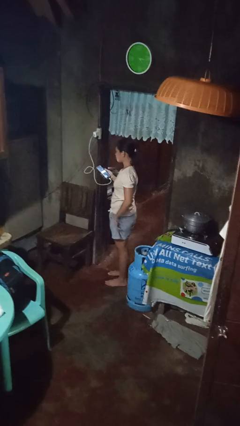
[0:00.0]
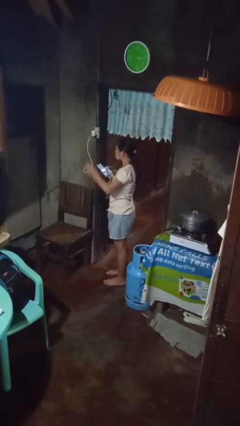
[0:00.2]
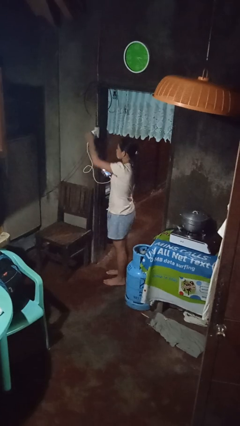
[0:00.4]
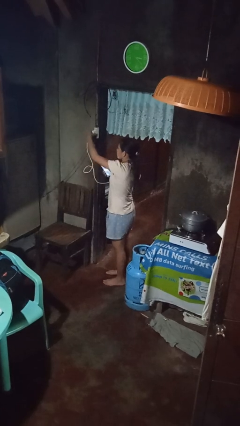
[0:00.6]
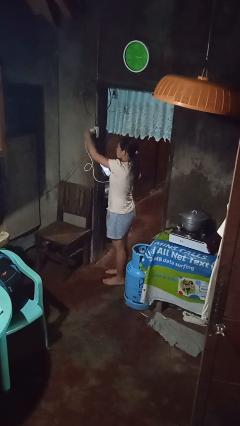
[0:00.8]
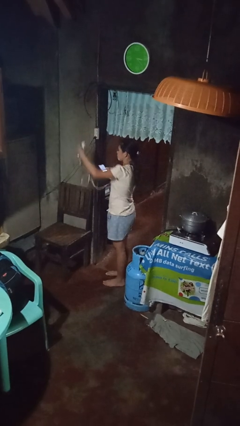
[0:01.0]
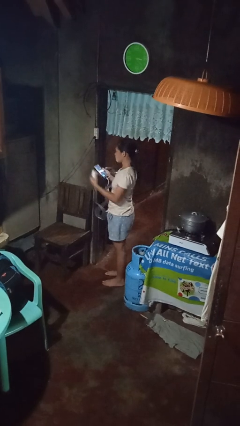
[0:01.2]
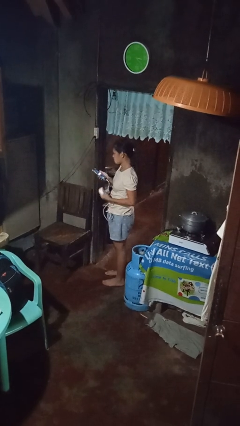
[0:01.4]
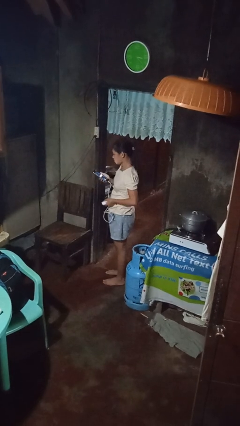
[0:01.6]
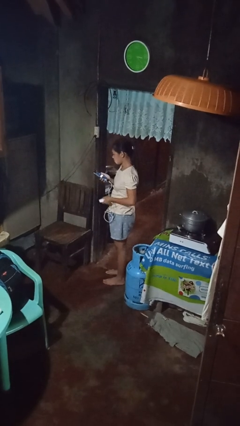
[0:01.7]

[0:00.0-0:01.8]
person unplugs from electrical socket

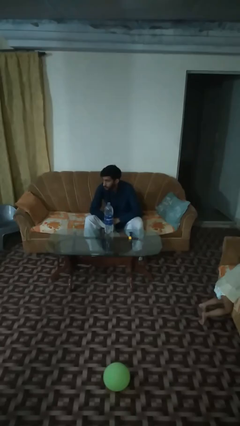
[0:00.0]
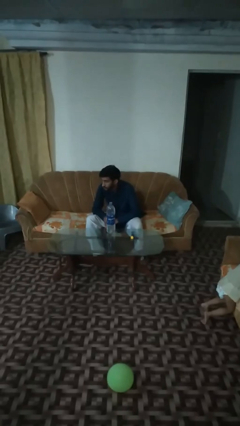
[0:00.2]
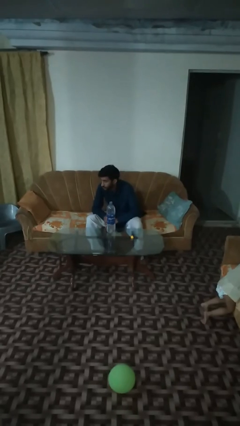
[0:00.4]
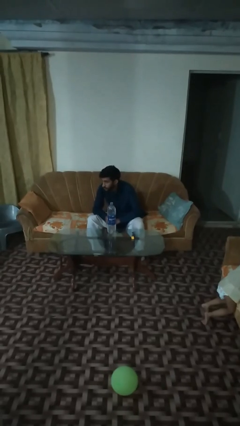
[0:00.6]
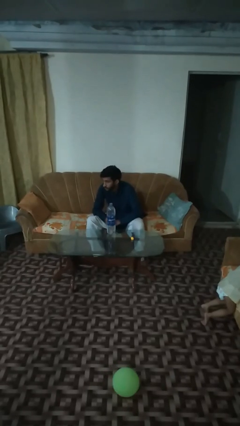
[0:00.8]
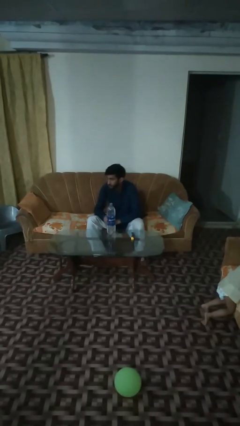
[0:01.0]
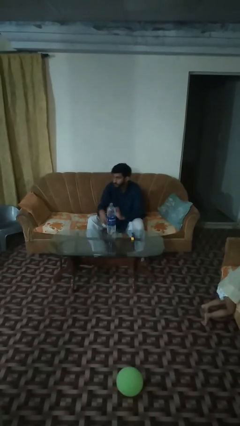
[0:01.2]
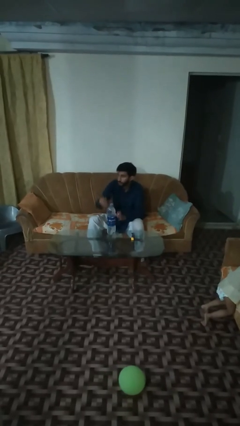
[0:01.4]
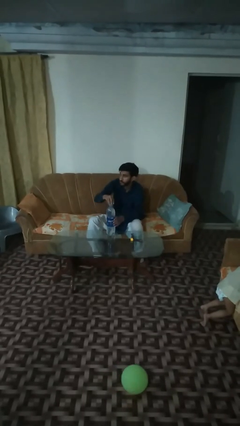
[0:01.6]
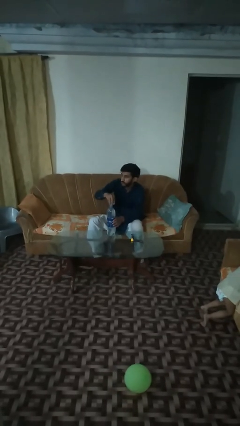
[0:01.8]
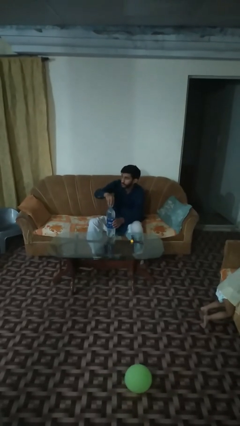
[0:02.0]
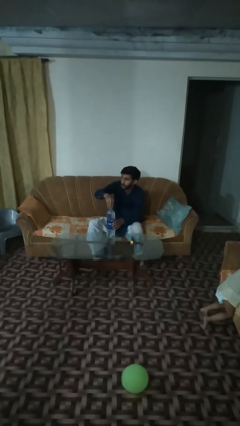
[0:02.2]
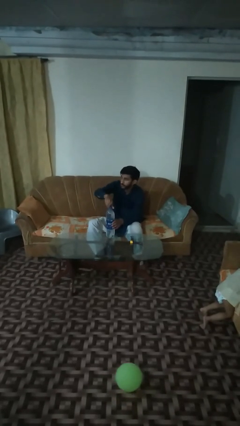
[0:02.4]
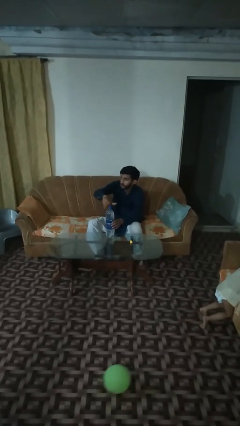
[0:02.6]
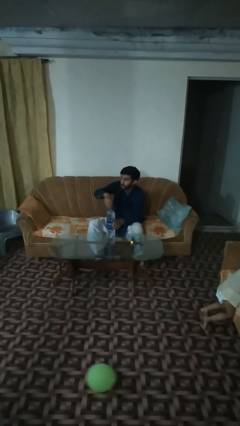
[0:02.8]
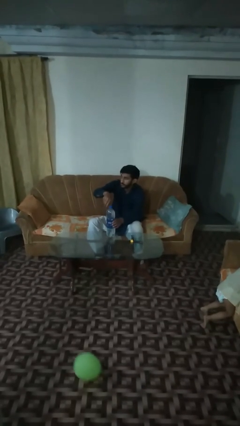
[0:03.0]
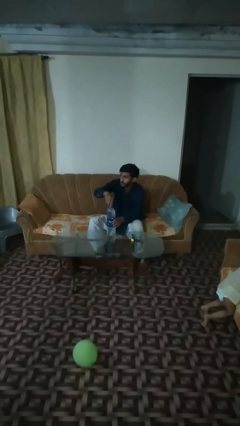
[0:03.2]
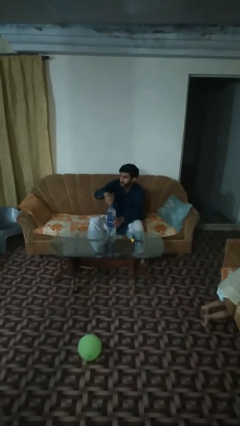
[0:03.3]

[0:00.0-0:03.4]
person screws lid to bottle

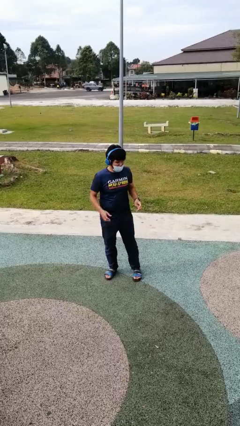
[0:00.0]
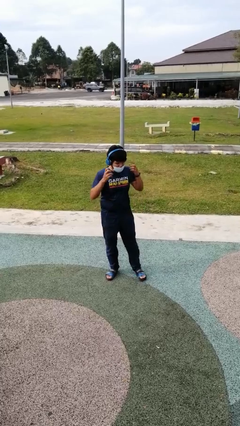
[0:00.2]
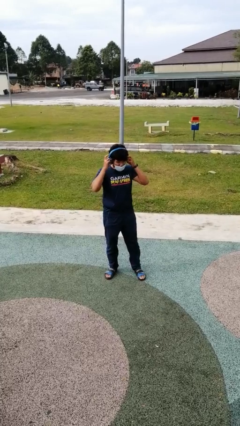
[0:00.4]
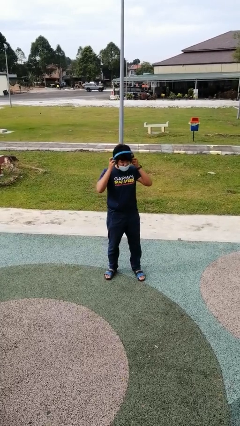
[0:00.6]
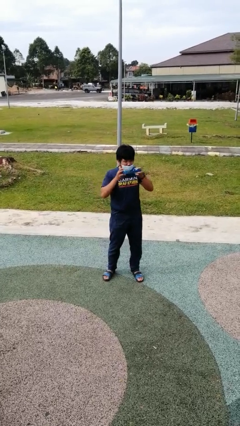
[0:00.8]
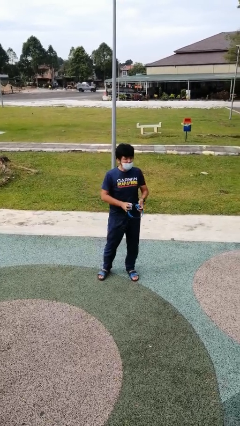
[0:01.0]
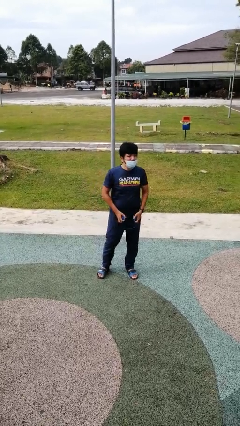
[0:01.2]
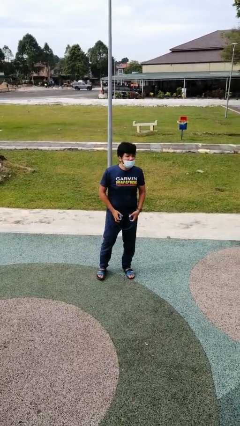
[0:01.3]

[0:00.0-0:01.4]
person takes off headphones

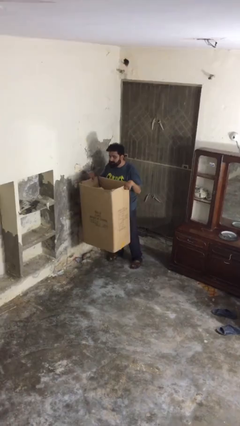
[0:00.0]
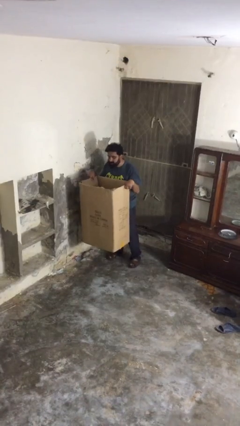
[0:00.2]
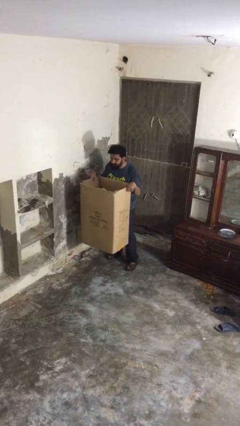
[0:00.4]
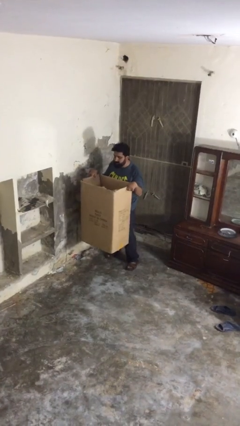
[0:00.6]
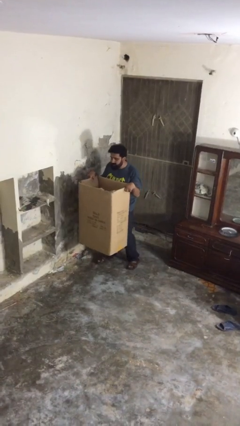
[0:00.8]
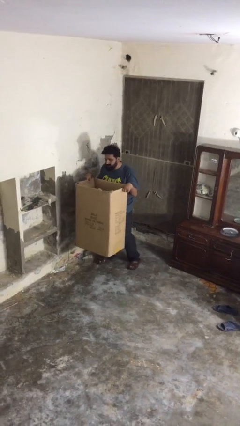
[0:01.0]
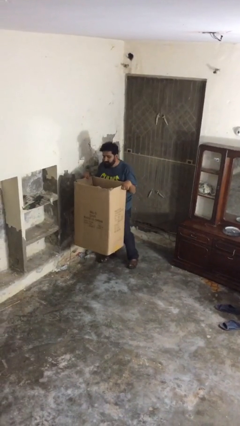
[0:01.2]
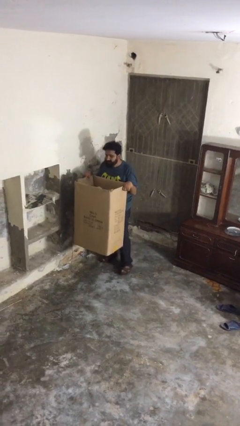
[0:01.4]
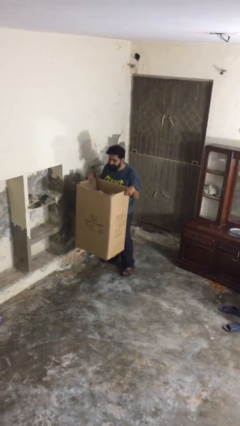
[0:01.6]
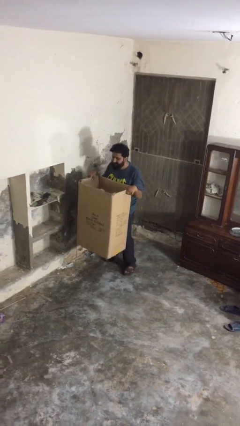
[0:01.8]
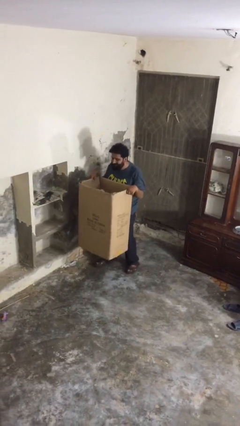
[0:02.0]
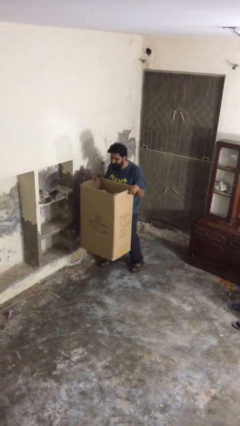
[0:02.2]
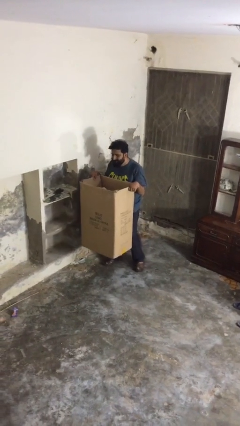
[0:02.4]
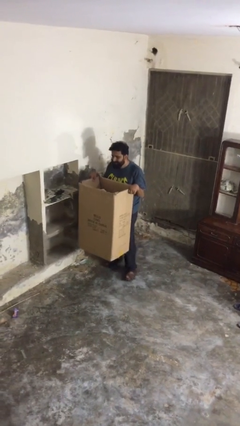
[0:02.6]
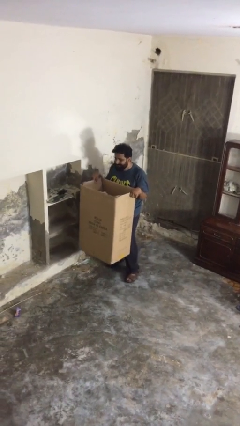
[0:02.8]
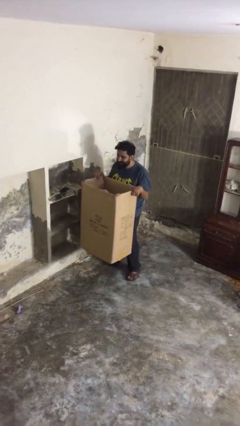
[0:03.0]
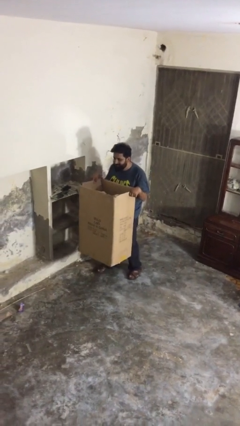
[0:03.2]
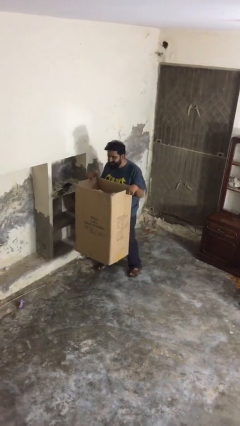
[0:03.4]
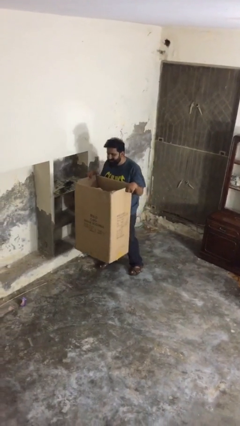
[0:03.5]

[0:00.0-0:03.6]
person carries heavy object

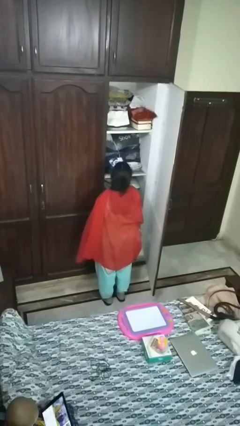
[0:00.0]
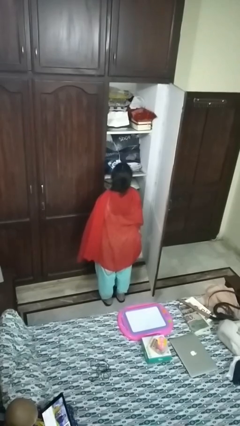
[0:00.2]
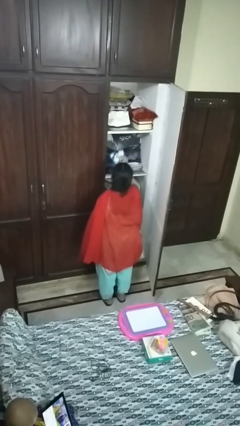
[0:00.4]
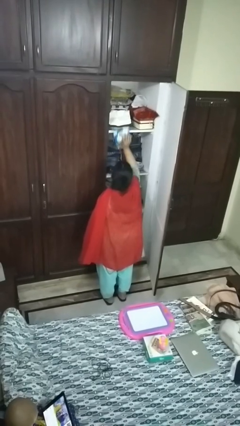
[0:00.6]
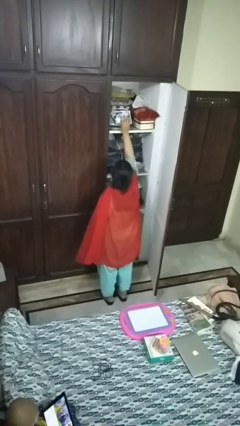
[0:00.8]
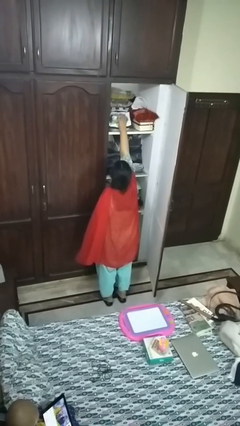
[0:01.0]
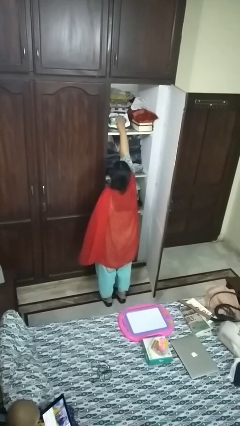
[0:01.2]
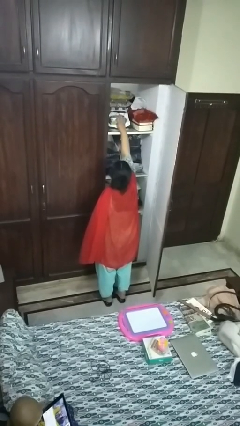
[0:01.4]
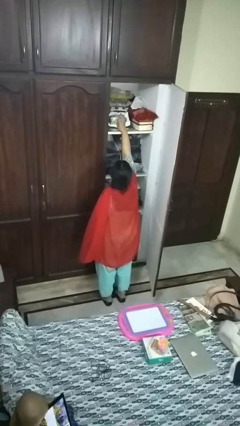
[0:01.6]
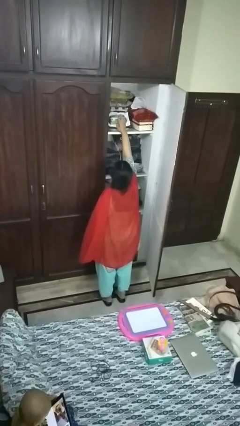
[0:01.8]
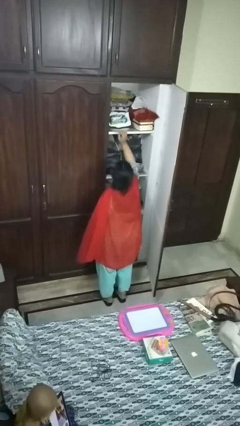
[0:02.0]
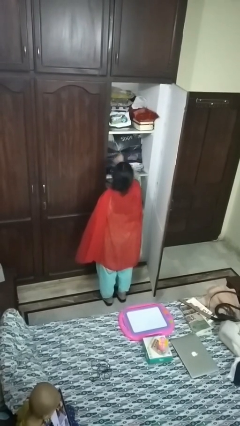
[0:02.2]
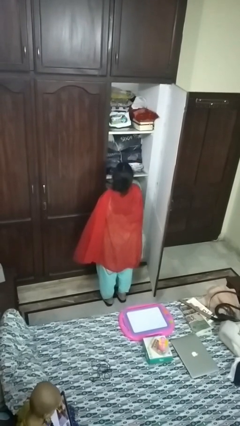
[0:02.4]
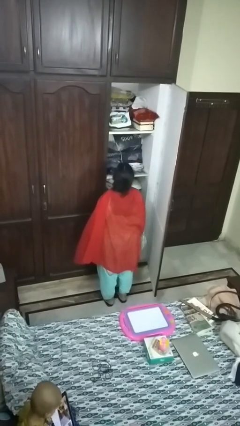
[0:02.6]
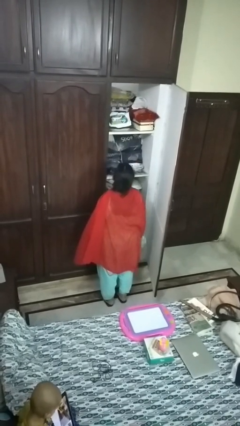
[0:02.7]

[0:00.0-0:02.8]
person puts down object on countertop

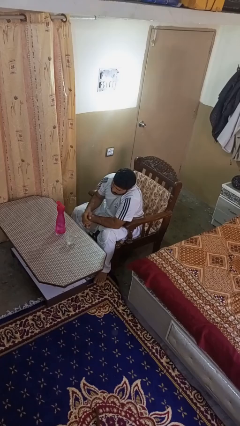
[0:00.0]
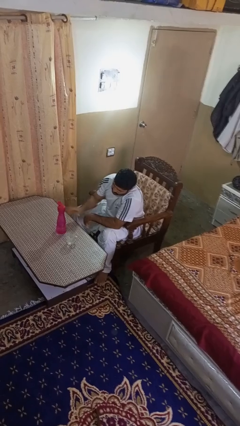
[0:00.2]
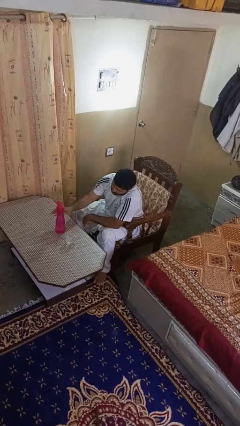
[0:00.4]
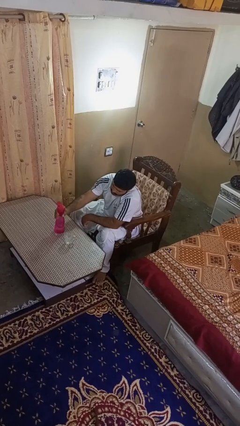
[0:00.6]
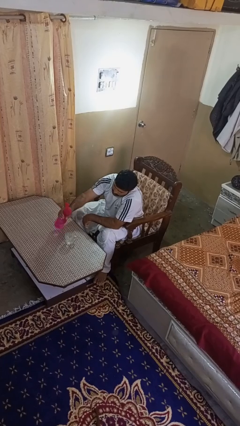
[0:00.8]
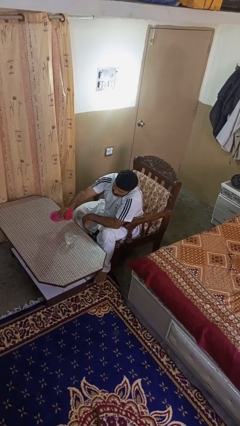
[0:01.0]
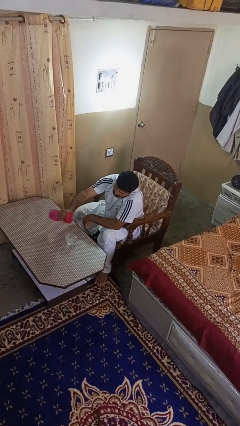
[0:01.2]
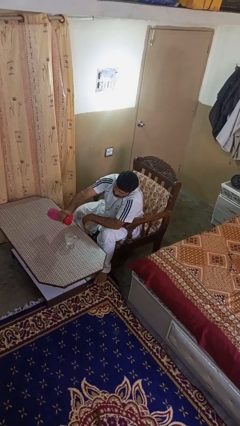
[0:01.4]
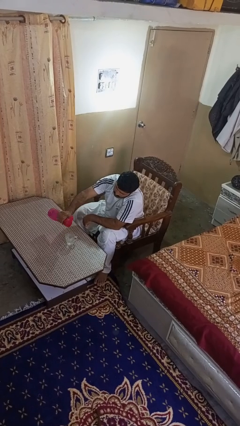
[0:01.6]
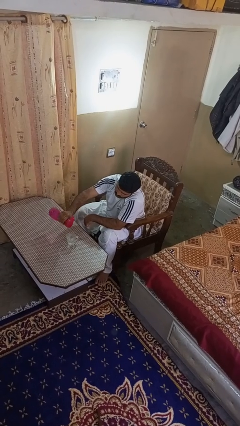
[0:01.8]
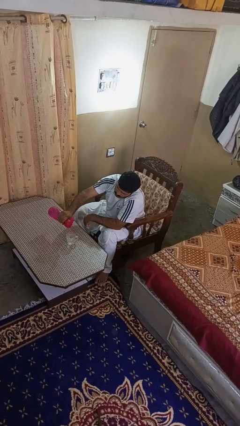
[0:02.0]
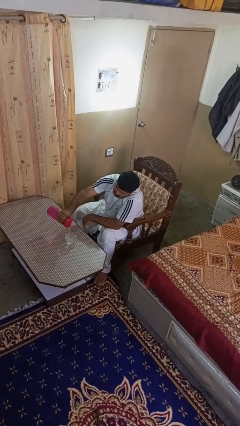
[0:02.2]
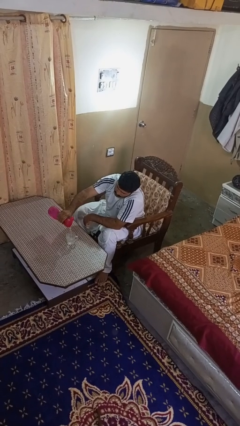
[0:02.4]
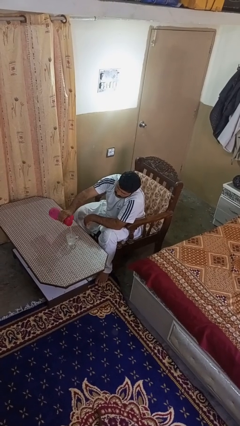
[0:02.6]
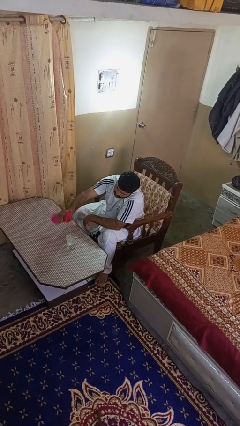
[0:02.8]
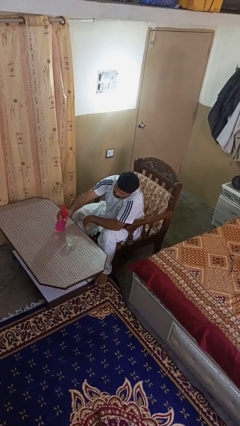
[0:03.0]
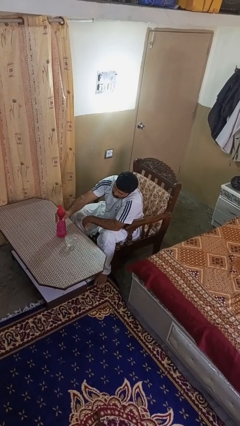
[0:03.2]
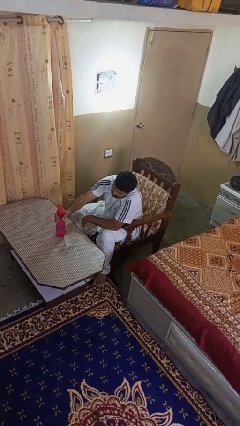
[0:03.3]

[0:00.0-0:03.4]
person pours liquid into cup

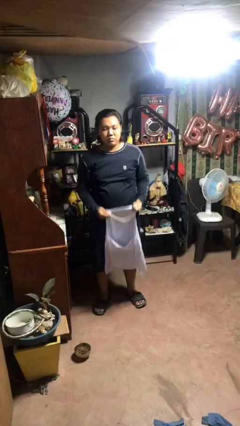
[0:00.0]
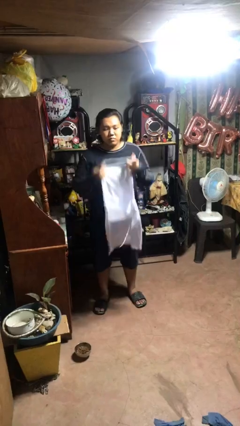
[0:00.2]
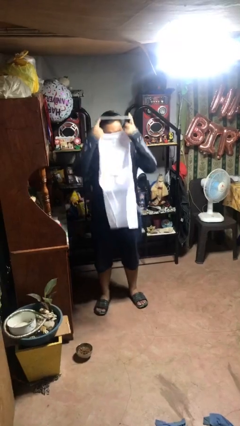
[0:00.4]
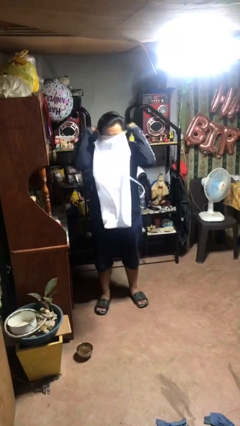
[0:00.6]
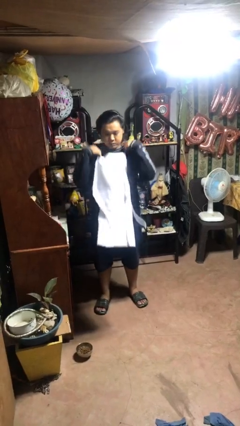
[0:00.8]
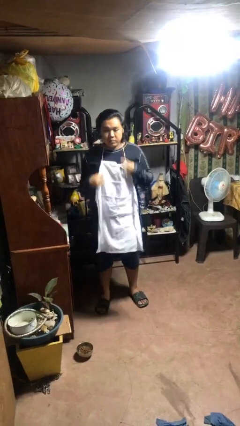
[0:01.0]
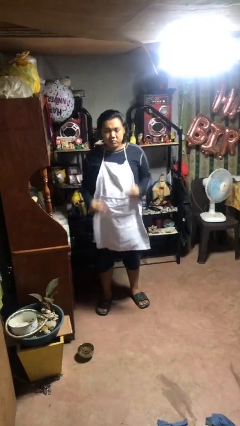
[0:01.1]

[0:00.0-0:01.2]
person puts on apron
